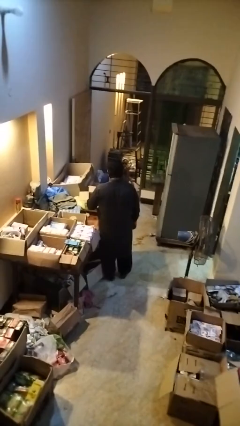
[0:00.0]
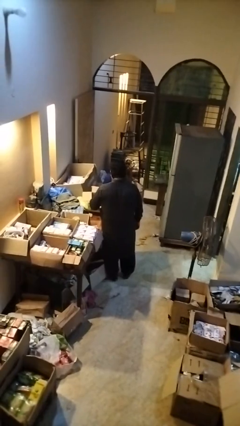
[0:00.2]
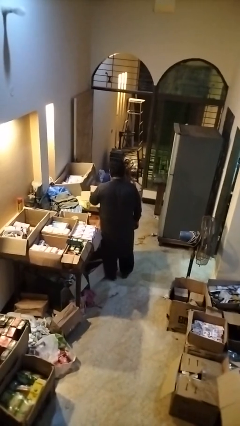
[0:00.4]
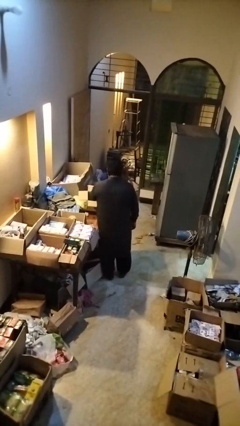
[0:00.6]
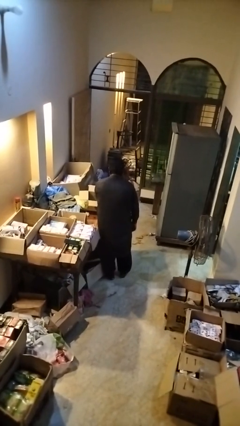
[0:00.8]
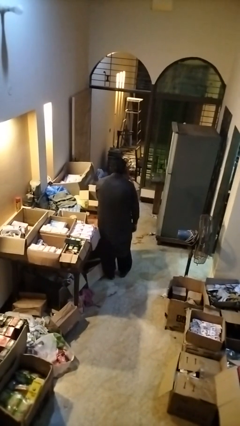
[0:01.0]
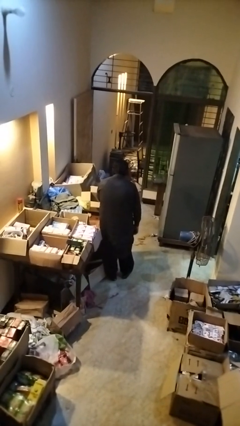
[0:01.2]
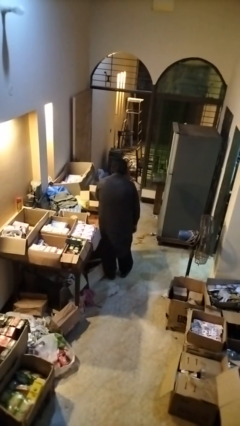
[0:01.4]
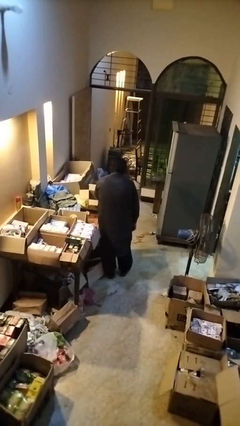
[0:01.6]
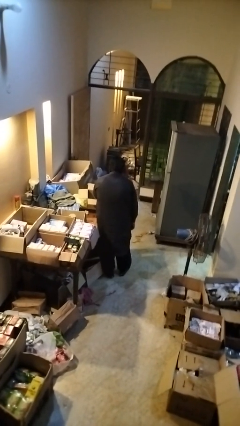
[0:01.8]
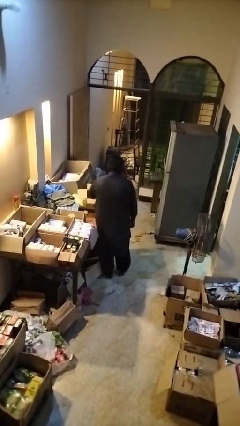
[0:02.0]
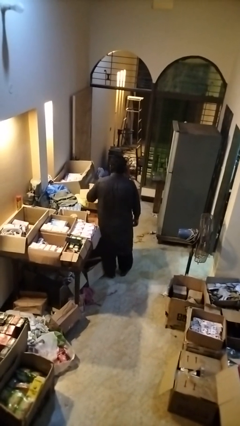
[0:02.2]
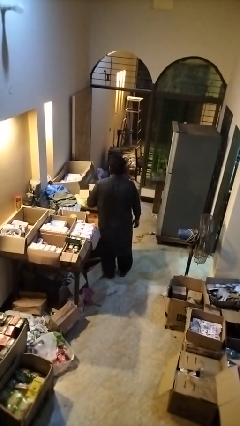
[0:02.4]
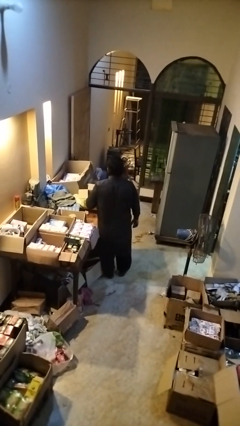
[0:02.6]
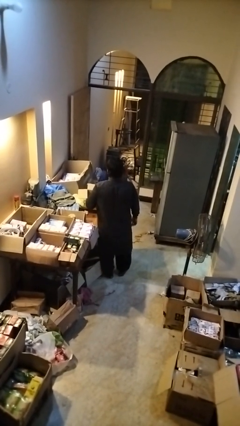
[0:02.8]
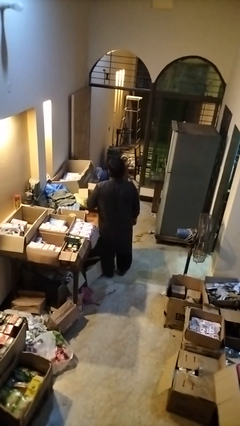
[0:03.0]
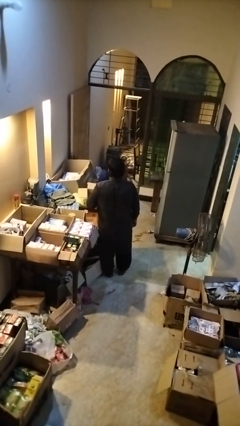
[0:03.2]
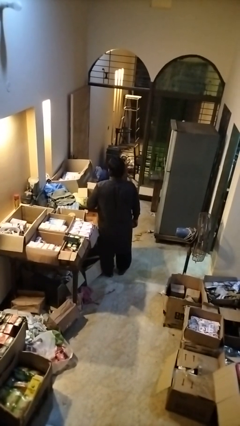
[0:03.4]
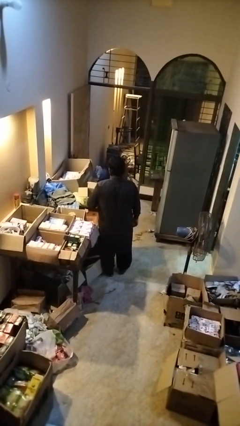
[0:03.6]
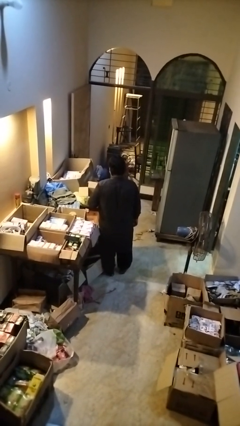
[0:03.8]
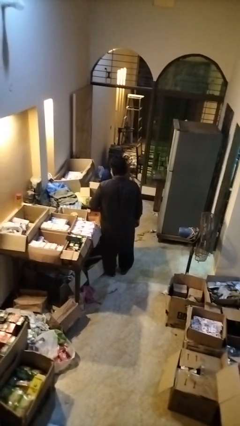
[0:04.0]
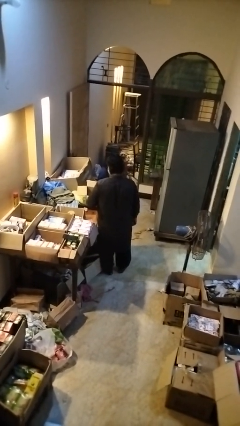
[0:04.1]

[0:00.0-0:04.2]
person takes object from box

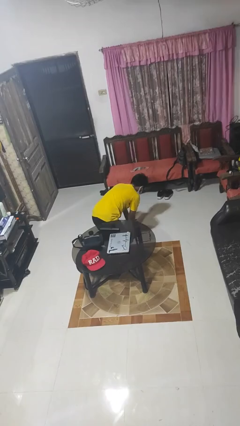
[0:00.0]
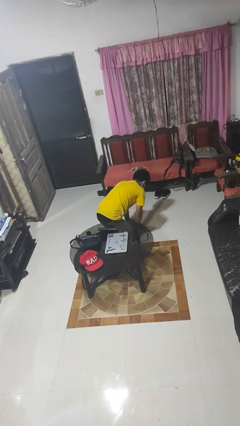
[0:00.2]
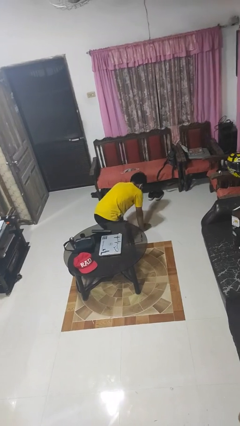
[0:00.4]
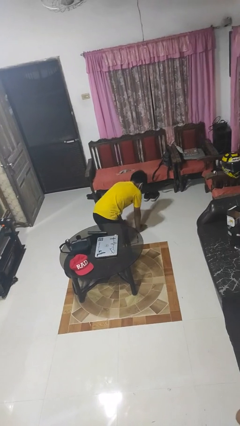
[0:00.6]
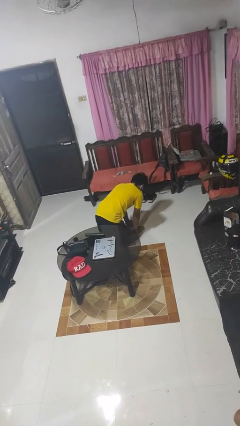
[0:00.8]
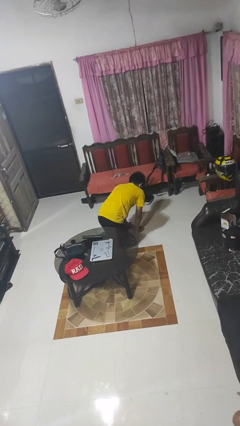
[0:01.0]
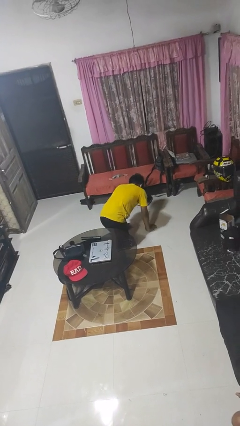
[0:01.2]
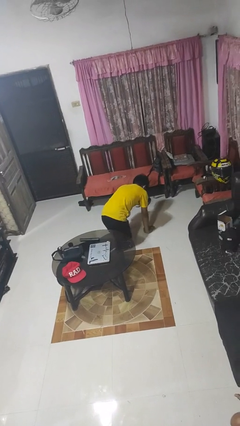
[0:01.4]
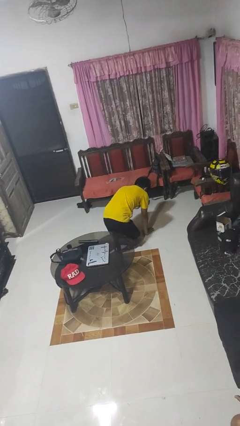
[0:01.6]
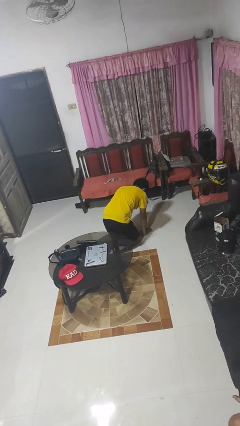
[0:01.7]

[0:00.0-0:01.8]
person crawls

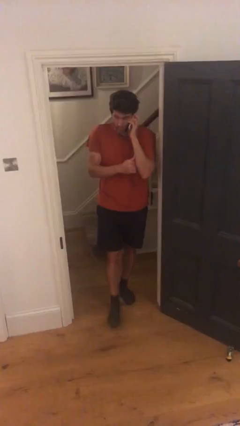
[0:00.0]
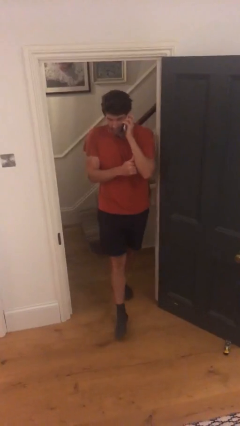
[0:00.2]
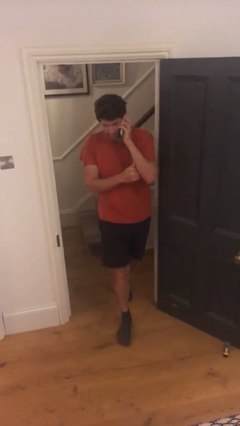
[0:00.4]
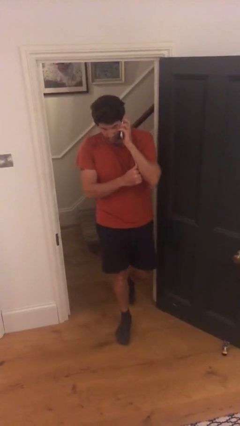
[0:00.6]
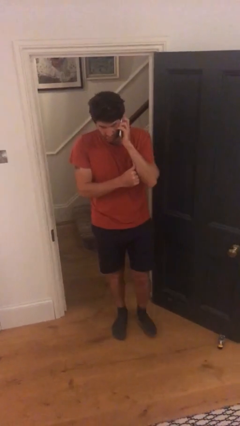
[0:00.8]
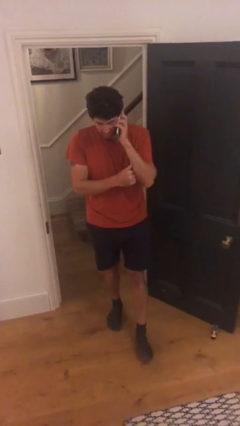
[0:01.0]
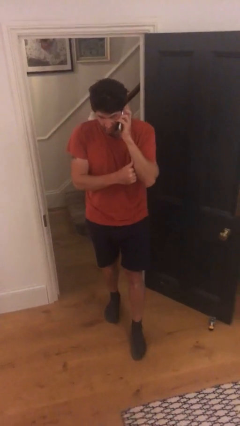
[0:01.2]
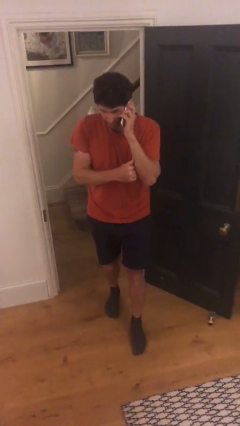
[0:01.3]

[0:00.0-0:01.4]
person enters scene through structure

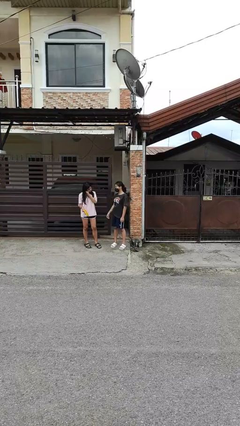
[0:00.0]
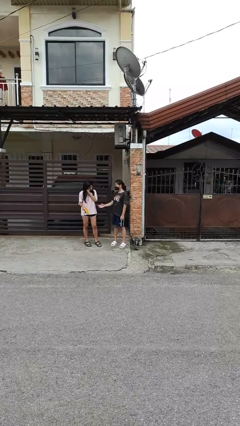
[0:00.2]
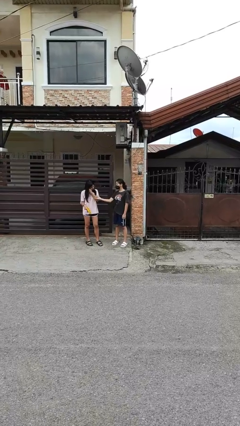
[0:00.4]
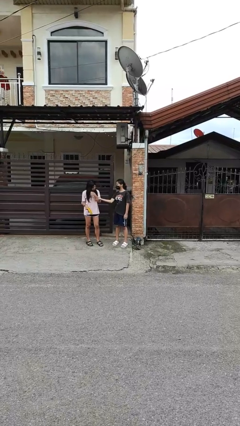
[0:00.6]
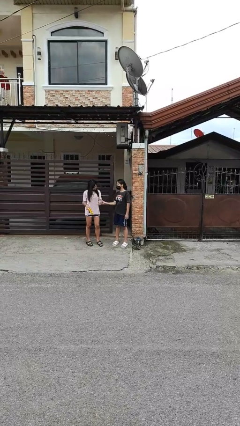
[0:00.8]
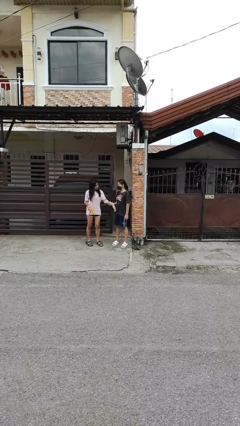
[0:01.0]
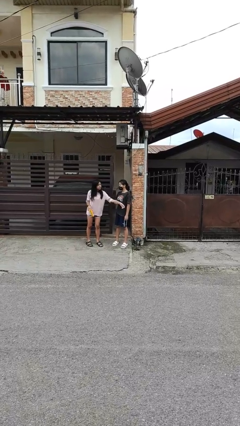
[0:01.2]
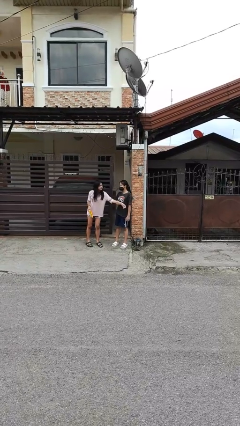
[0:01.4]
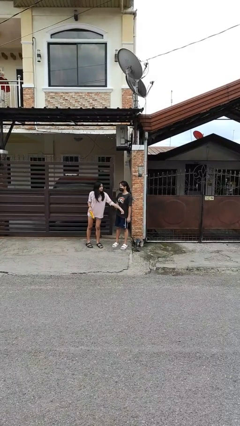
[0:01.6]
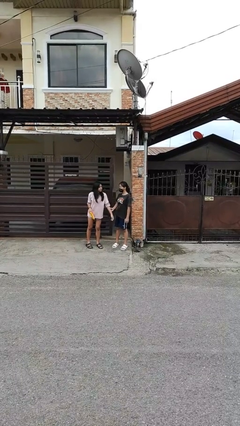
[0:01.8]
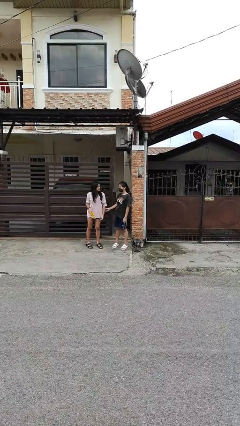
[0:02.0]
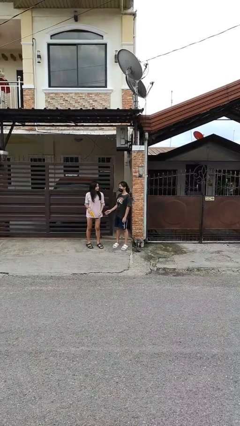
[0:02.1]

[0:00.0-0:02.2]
person grabs person by forearm

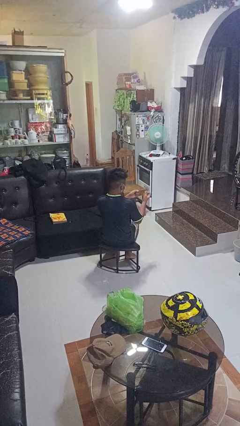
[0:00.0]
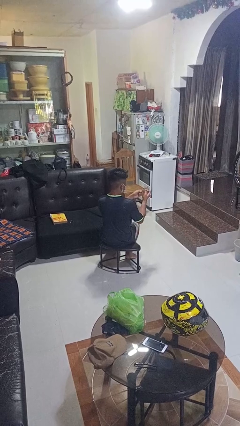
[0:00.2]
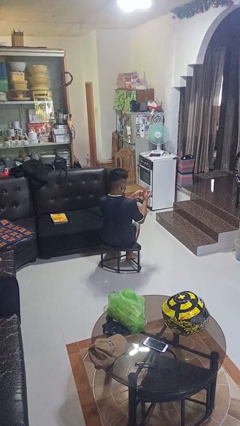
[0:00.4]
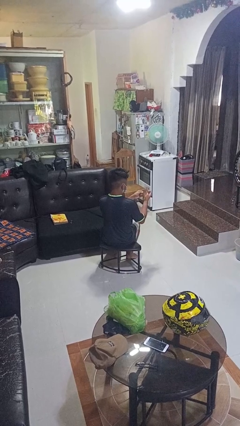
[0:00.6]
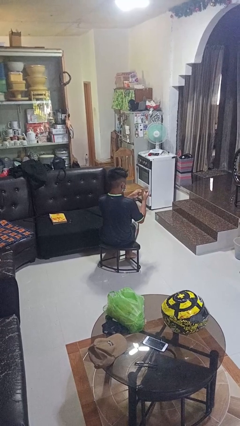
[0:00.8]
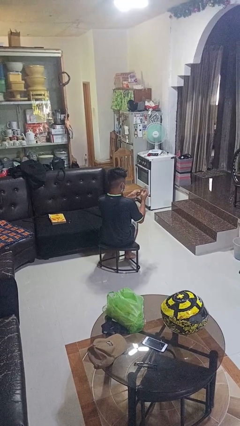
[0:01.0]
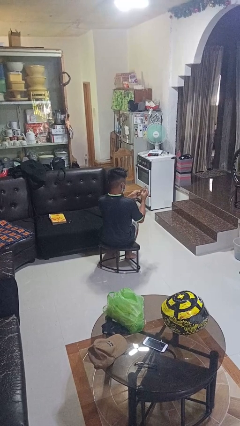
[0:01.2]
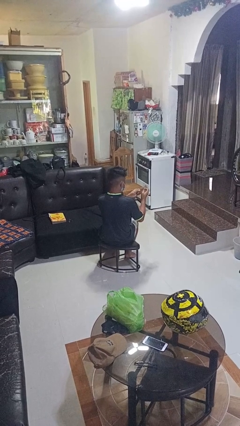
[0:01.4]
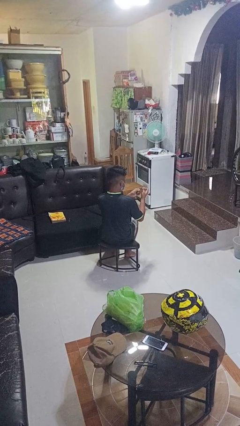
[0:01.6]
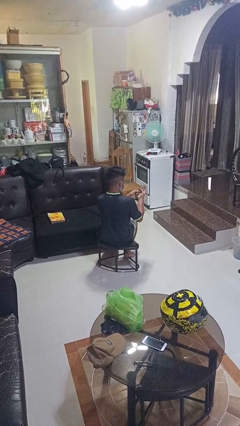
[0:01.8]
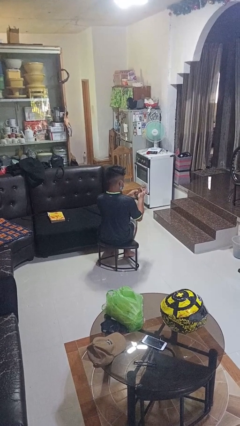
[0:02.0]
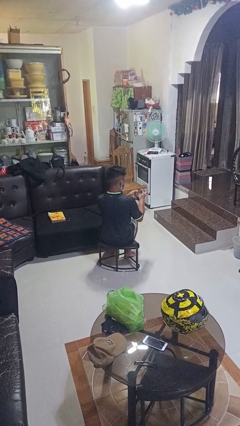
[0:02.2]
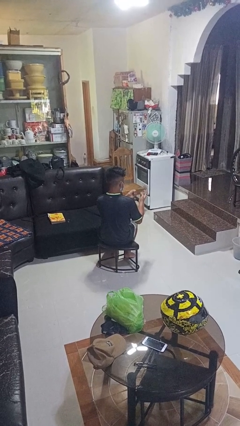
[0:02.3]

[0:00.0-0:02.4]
person files fingernails

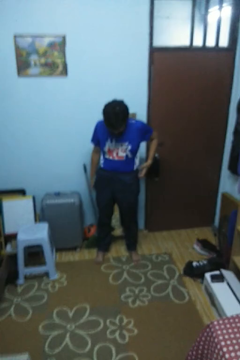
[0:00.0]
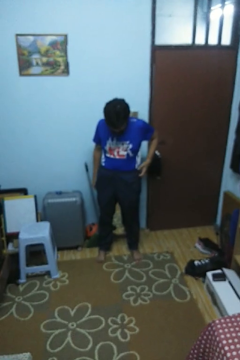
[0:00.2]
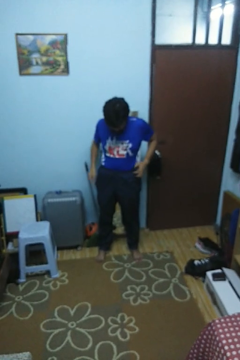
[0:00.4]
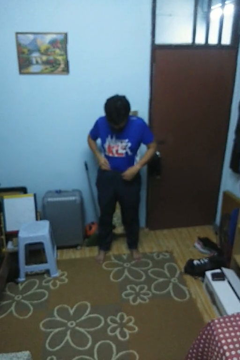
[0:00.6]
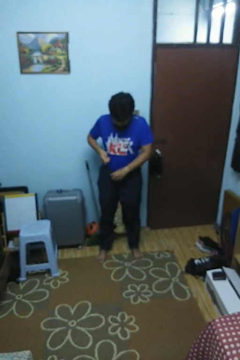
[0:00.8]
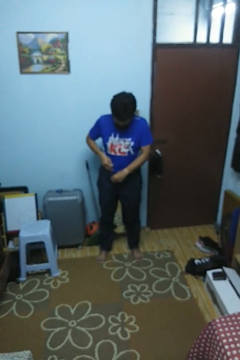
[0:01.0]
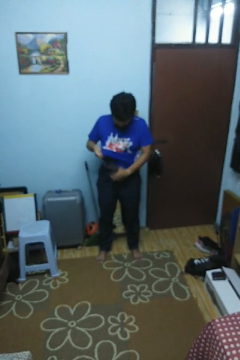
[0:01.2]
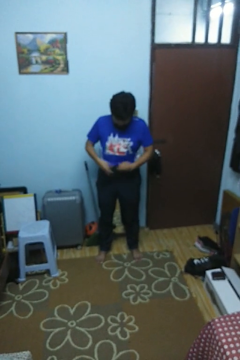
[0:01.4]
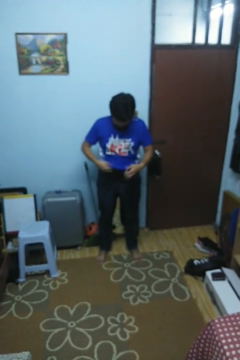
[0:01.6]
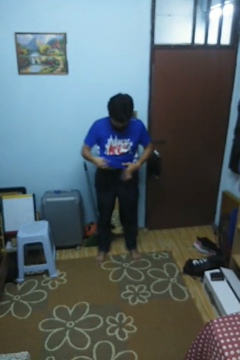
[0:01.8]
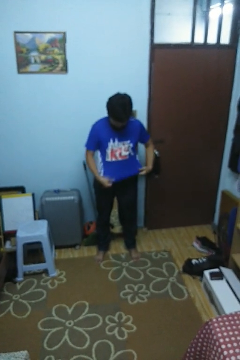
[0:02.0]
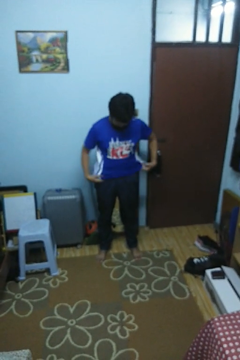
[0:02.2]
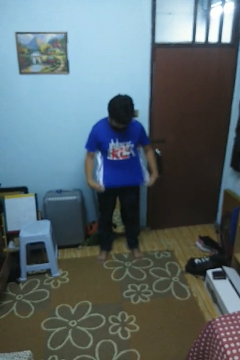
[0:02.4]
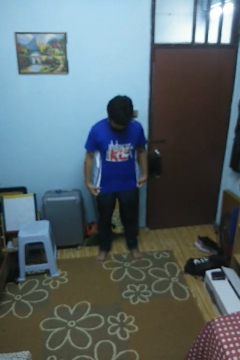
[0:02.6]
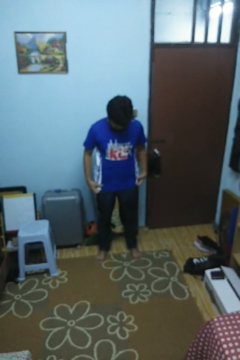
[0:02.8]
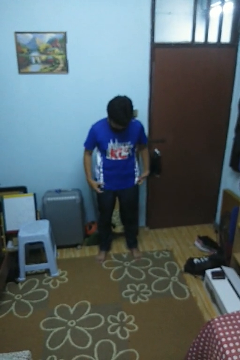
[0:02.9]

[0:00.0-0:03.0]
person untucks shirt

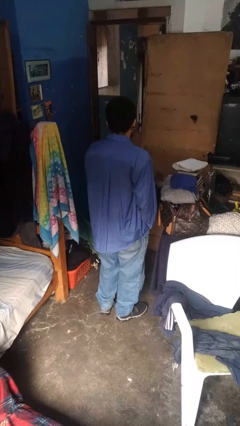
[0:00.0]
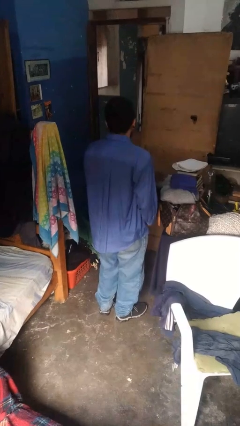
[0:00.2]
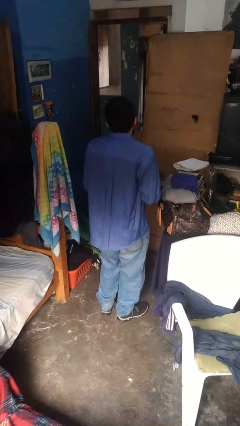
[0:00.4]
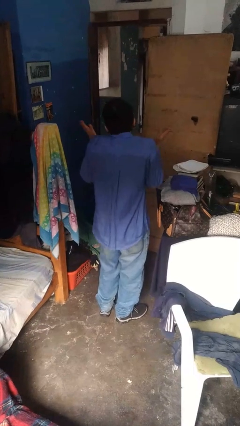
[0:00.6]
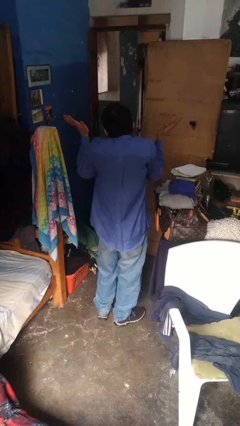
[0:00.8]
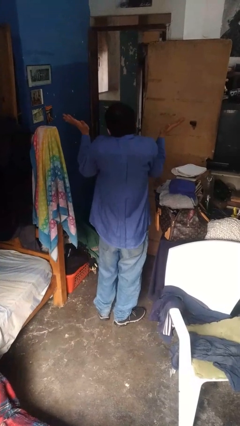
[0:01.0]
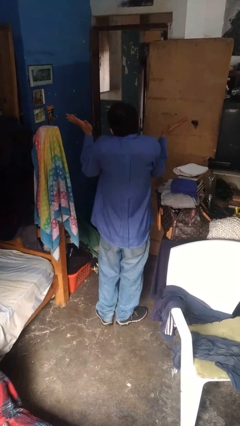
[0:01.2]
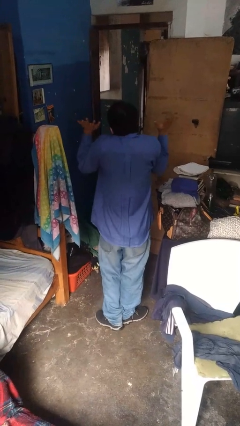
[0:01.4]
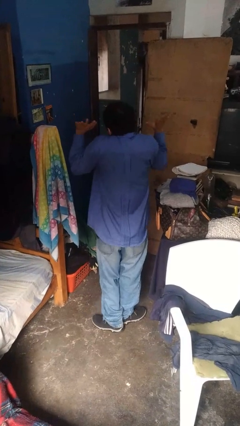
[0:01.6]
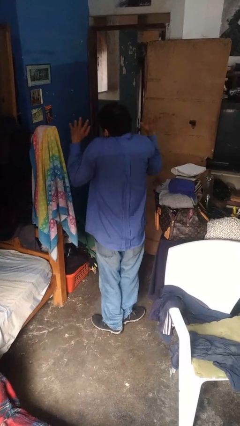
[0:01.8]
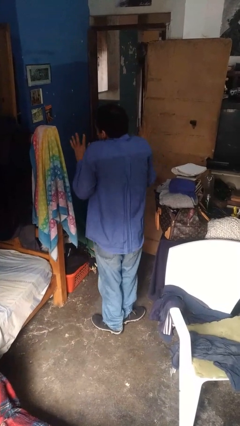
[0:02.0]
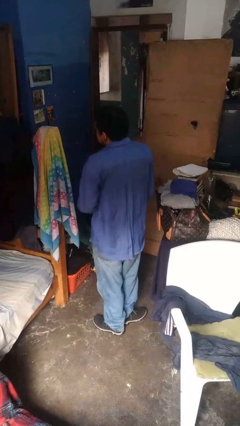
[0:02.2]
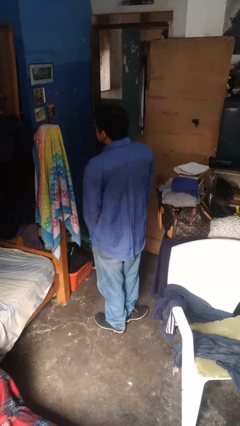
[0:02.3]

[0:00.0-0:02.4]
person shrugs

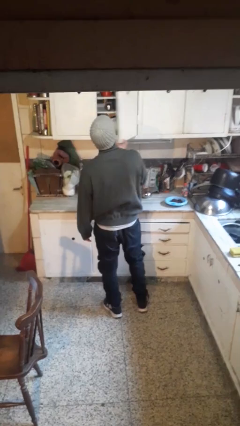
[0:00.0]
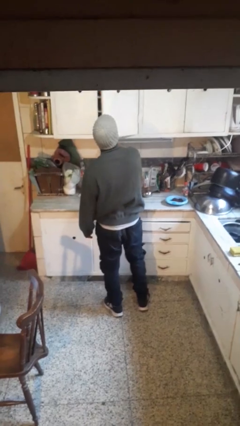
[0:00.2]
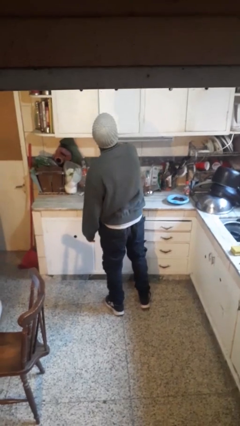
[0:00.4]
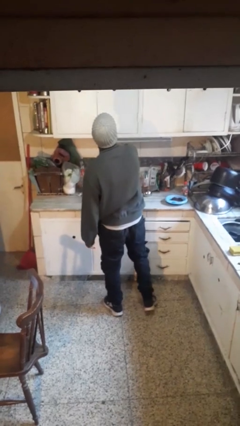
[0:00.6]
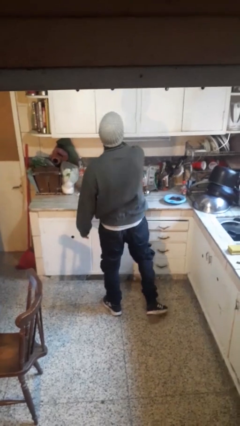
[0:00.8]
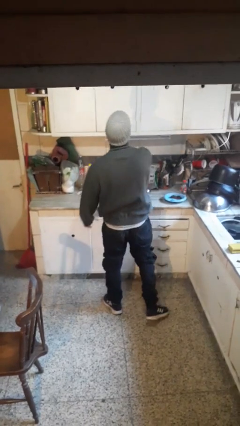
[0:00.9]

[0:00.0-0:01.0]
person closes cabinet
